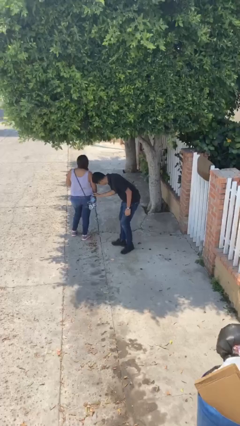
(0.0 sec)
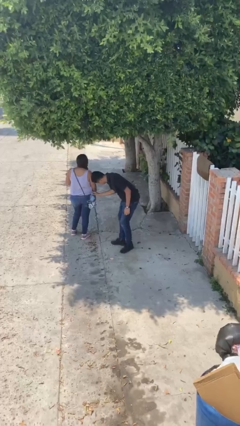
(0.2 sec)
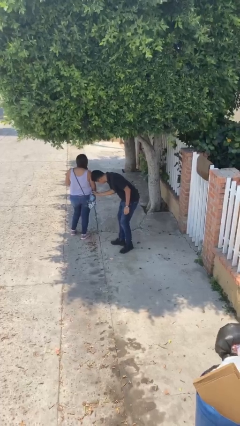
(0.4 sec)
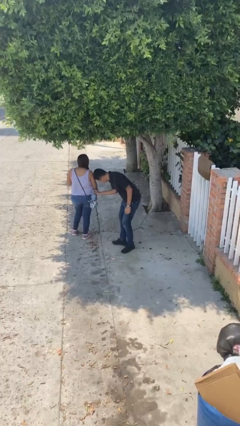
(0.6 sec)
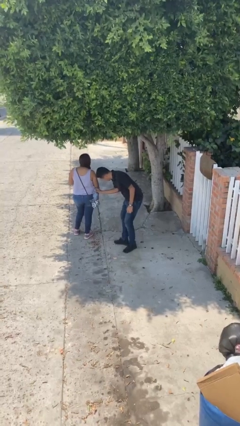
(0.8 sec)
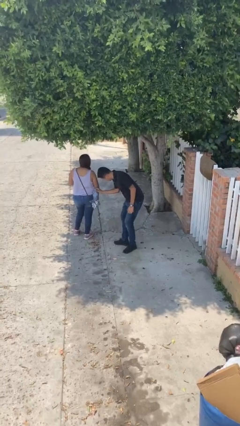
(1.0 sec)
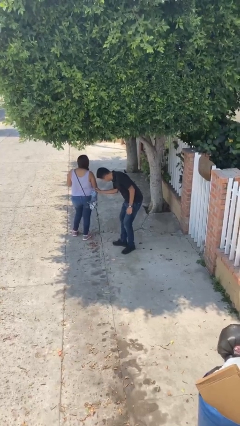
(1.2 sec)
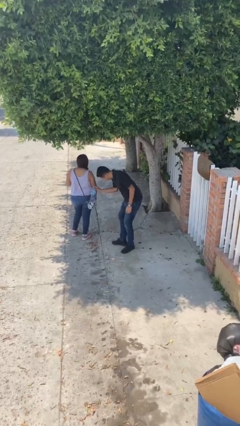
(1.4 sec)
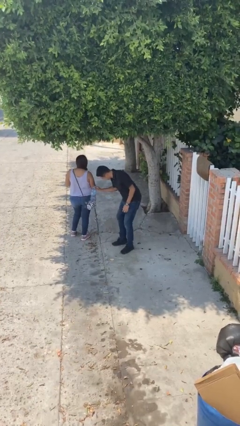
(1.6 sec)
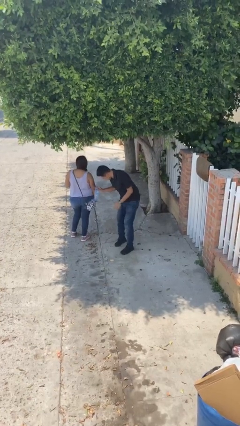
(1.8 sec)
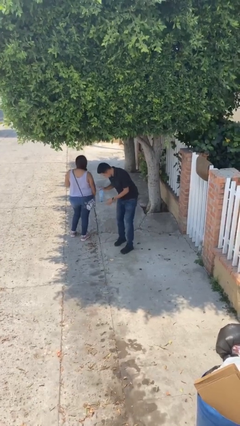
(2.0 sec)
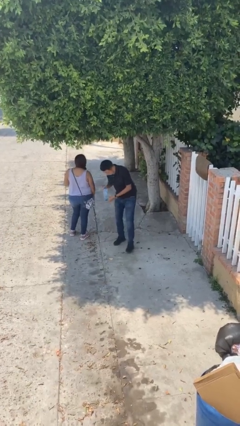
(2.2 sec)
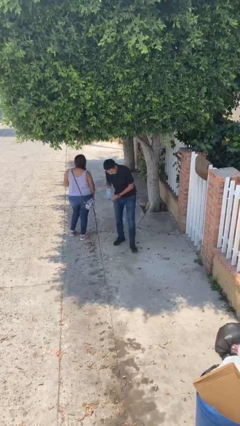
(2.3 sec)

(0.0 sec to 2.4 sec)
person steals object from person

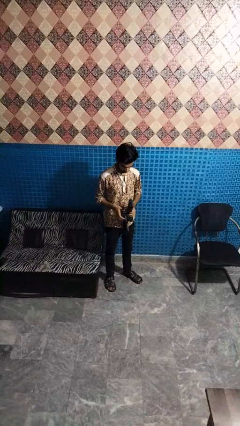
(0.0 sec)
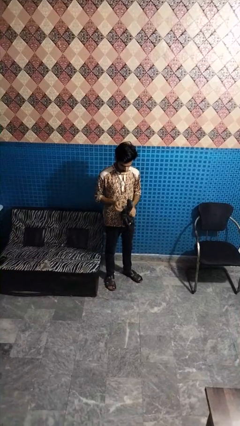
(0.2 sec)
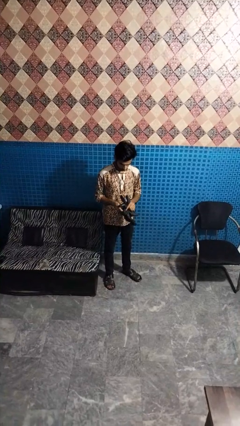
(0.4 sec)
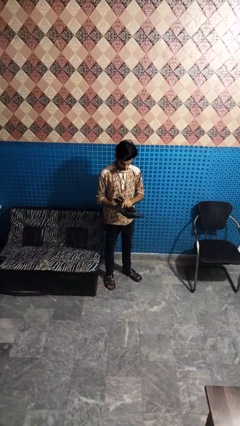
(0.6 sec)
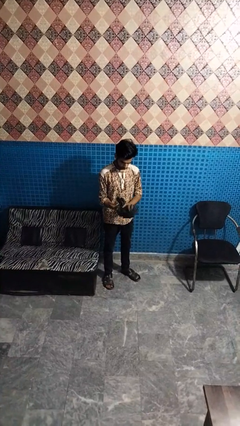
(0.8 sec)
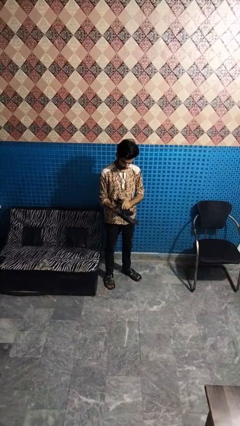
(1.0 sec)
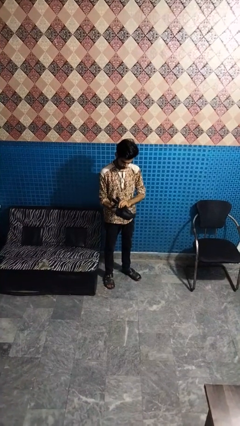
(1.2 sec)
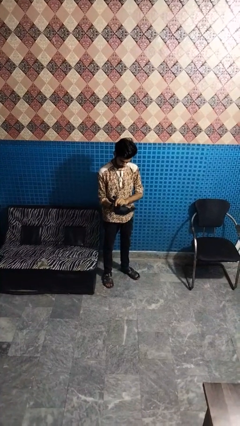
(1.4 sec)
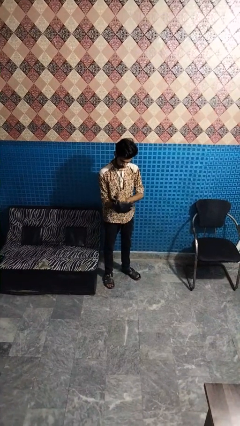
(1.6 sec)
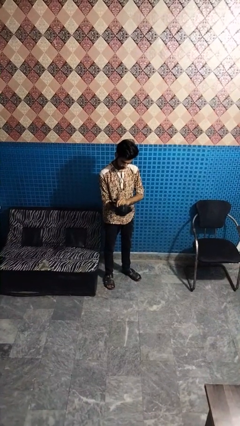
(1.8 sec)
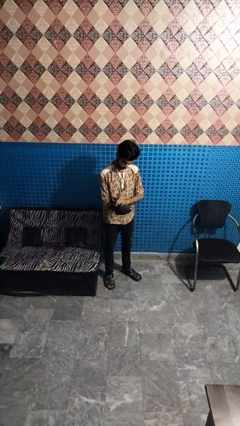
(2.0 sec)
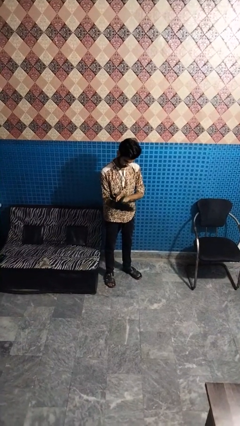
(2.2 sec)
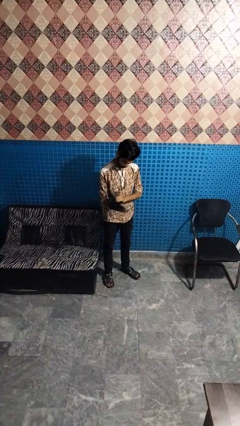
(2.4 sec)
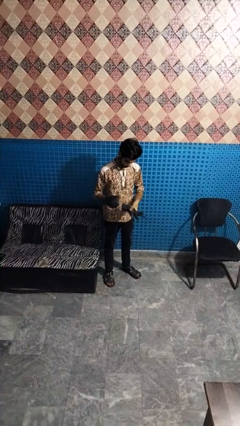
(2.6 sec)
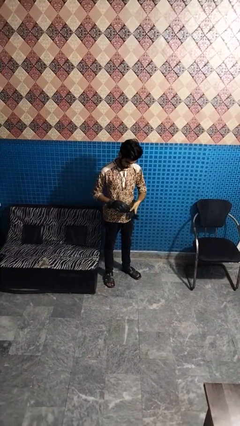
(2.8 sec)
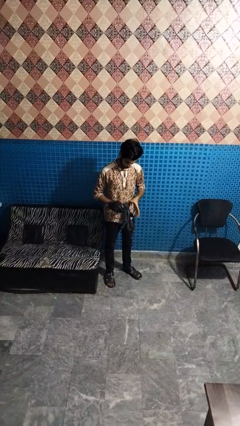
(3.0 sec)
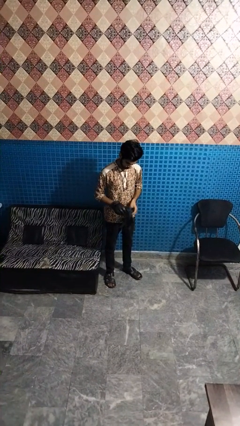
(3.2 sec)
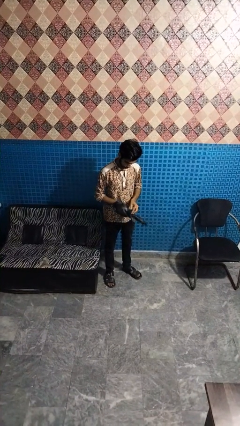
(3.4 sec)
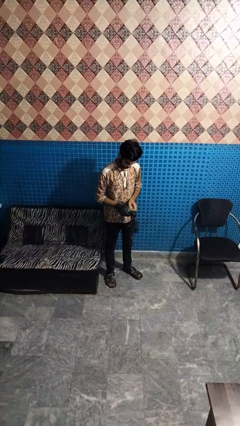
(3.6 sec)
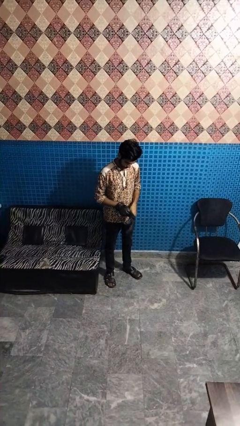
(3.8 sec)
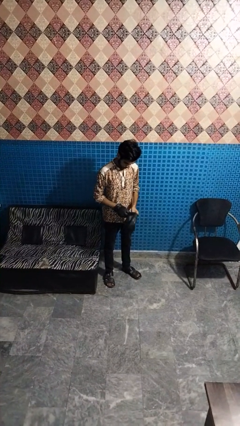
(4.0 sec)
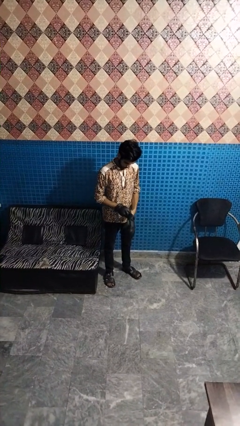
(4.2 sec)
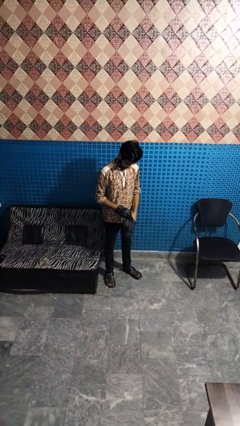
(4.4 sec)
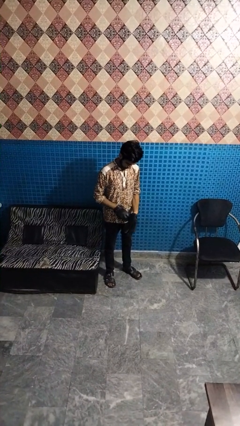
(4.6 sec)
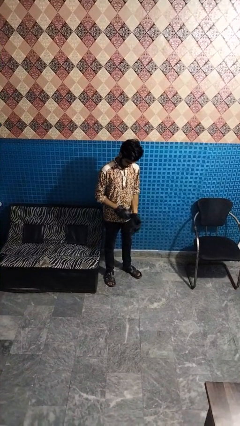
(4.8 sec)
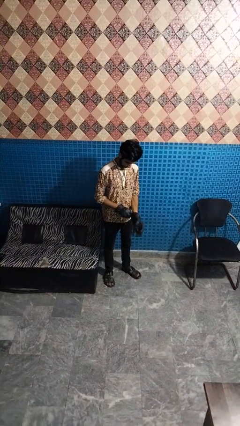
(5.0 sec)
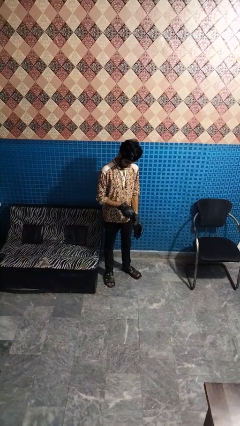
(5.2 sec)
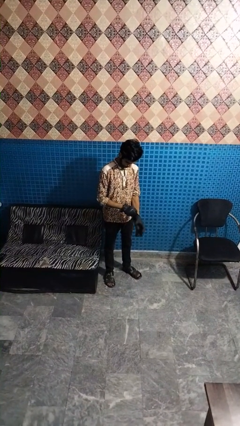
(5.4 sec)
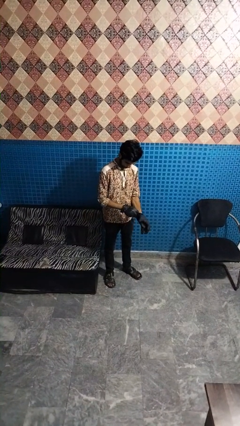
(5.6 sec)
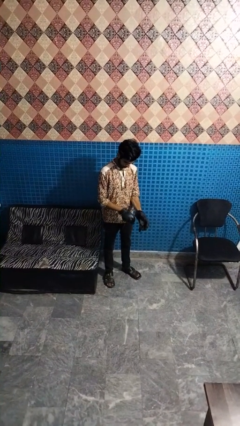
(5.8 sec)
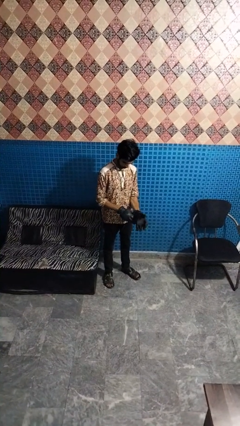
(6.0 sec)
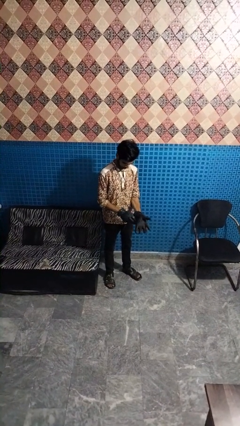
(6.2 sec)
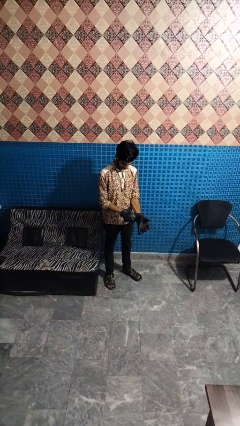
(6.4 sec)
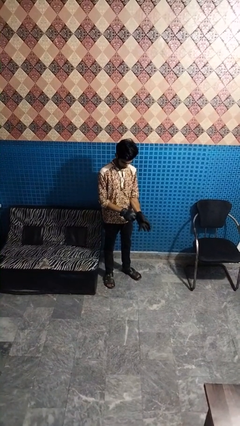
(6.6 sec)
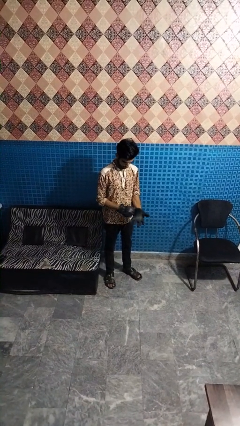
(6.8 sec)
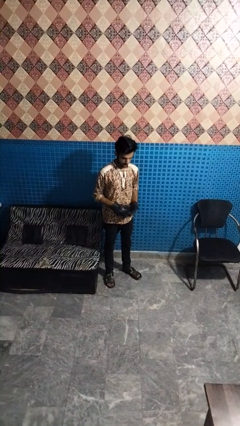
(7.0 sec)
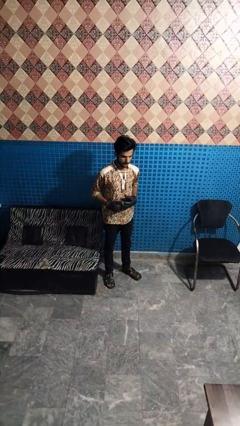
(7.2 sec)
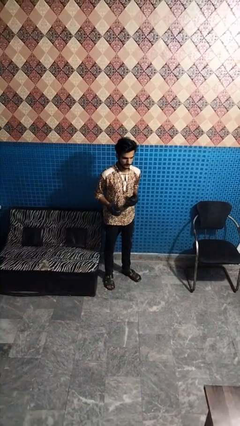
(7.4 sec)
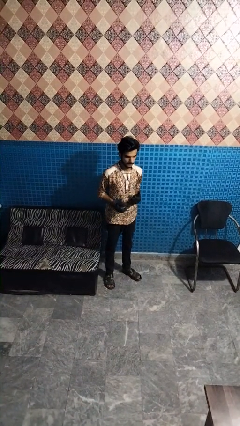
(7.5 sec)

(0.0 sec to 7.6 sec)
person puts on gloves

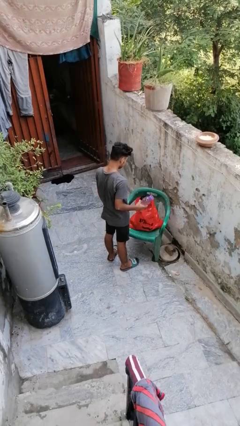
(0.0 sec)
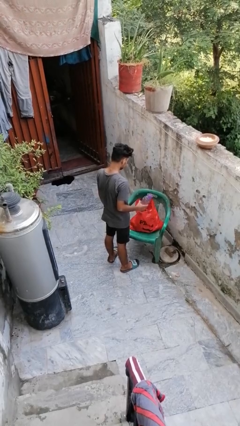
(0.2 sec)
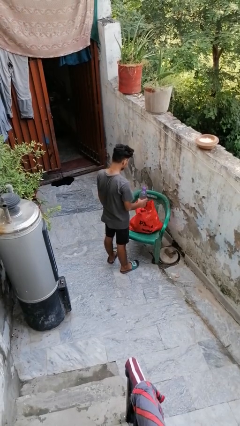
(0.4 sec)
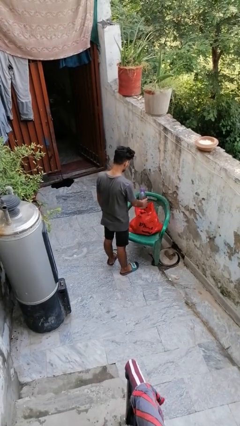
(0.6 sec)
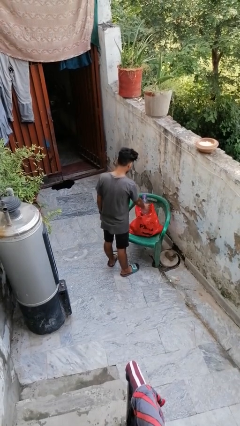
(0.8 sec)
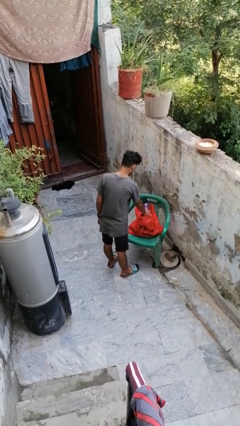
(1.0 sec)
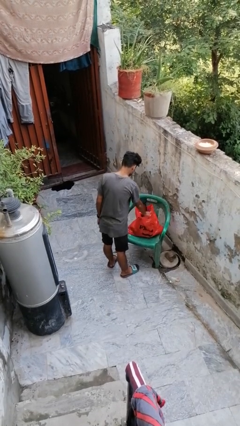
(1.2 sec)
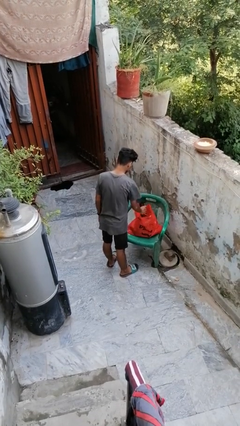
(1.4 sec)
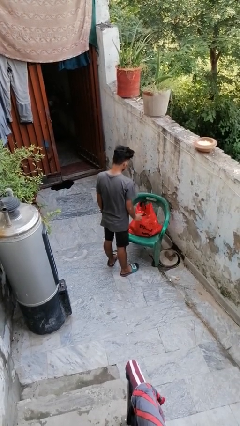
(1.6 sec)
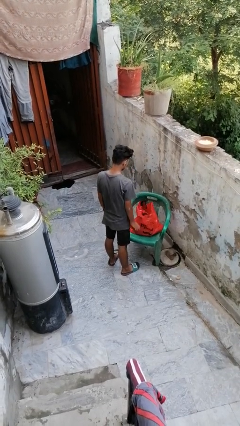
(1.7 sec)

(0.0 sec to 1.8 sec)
person puts object into bag

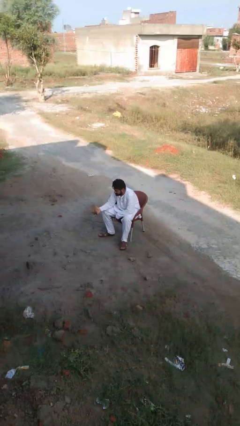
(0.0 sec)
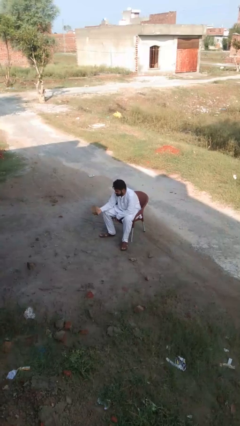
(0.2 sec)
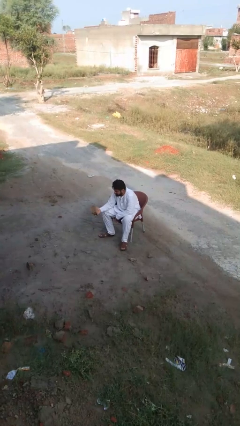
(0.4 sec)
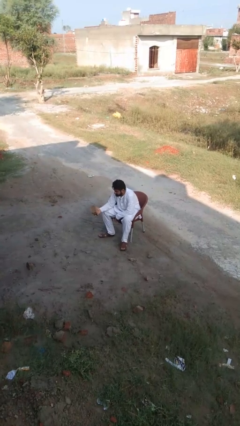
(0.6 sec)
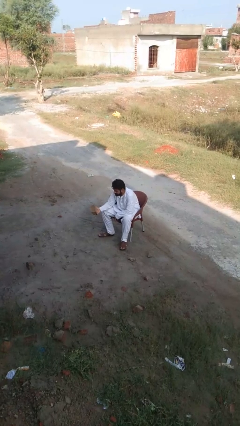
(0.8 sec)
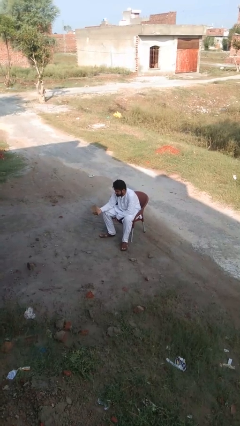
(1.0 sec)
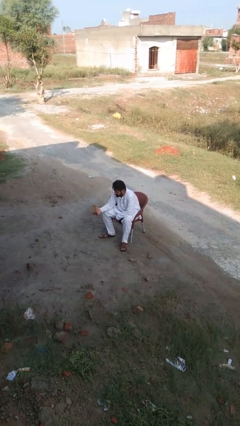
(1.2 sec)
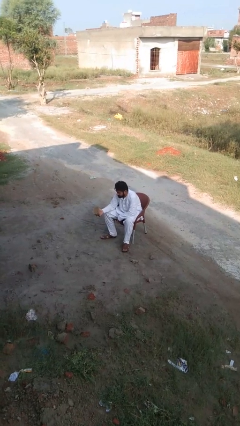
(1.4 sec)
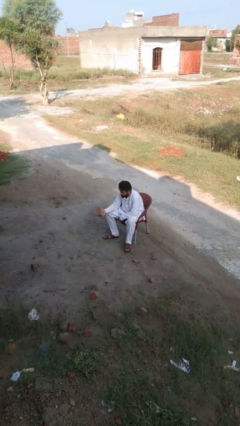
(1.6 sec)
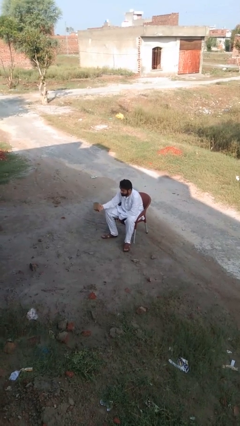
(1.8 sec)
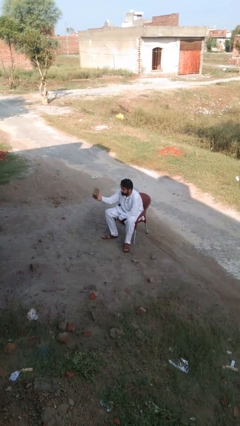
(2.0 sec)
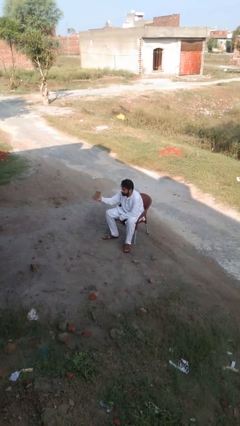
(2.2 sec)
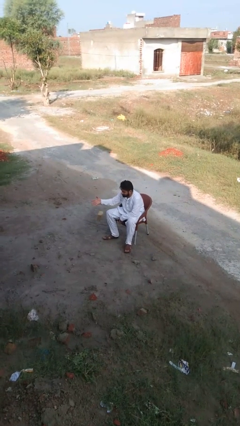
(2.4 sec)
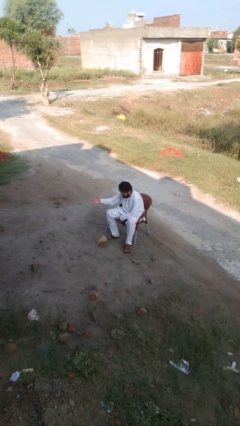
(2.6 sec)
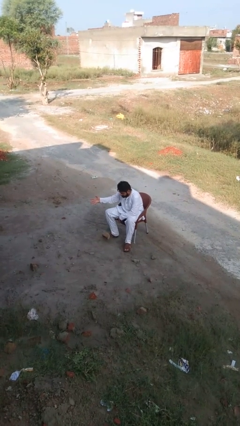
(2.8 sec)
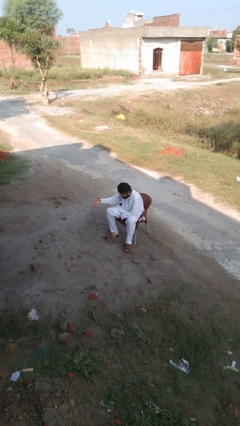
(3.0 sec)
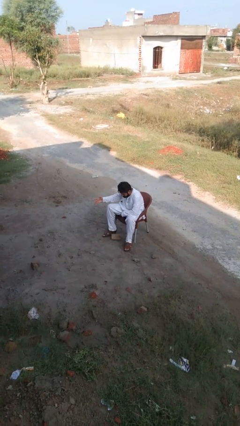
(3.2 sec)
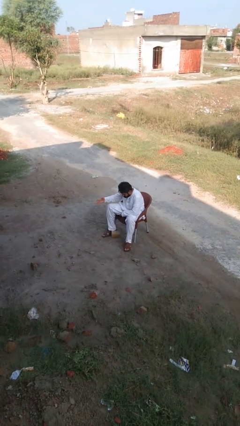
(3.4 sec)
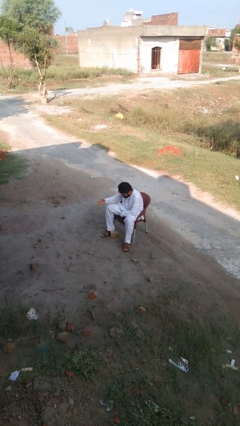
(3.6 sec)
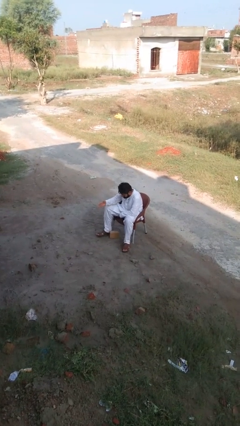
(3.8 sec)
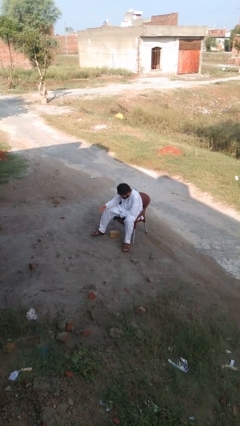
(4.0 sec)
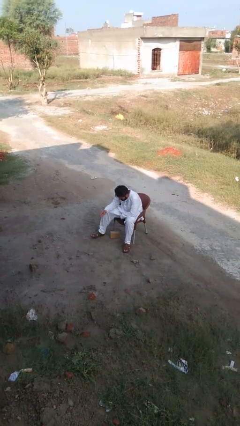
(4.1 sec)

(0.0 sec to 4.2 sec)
person throws object into air

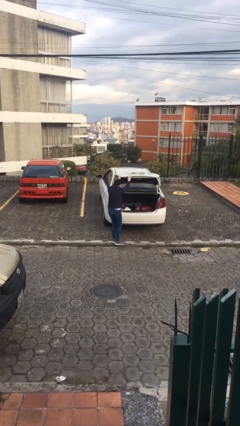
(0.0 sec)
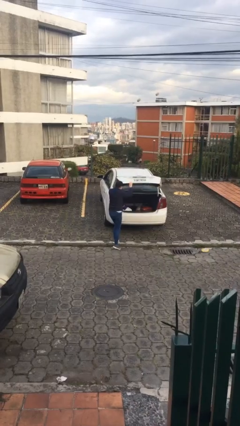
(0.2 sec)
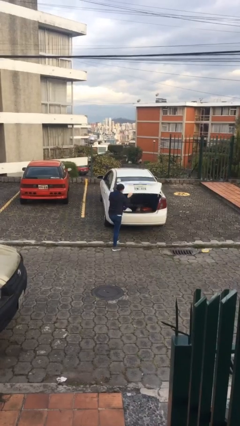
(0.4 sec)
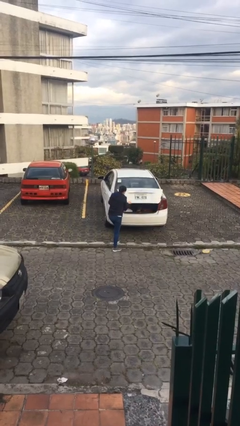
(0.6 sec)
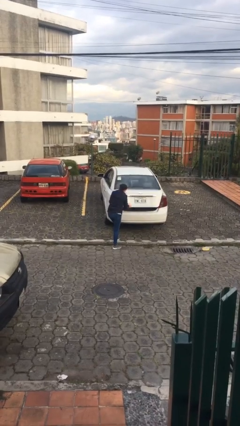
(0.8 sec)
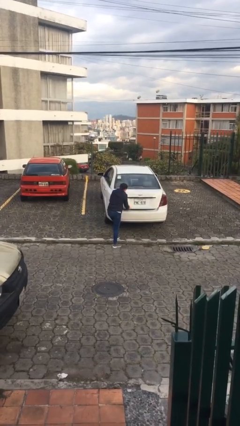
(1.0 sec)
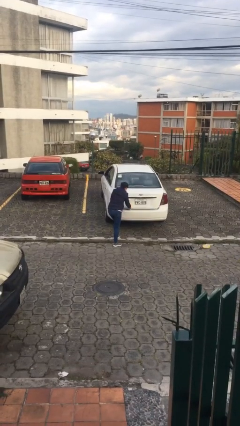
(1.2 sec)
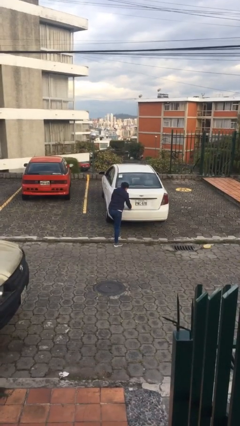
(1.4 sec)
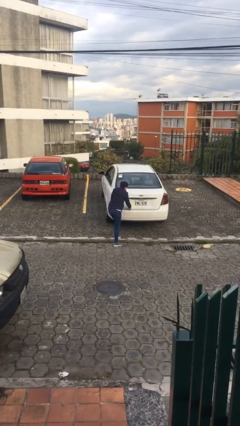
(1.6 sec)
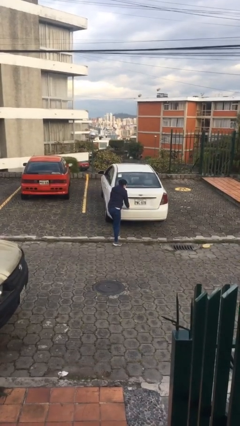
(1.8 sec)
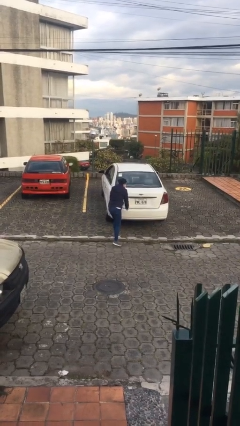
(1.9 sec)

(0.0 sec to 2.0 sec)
person closes car trunk
